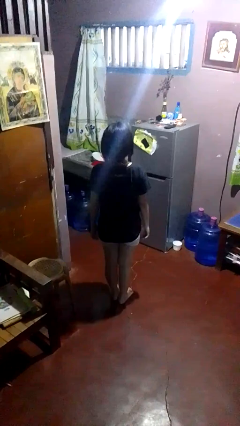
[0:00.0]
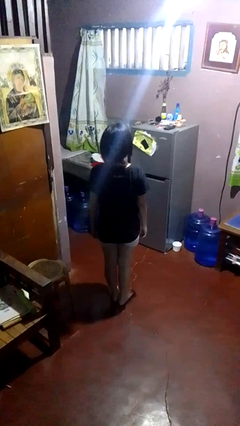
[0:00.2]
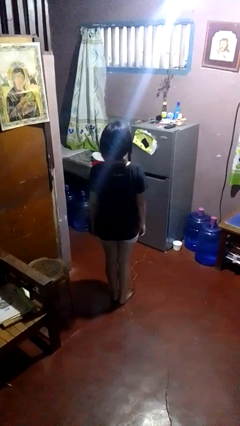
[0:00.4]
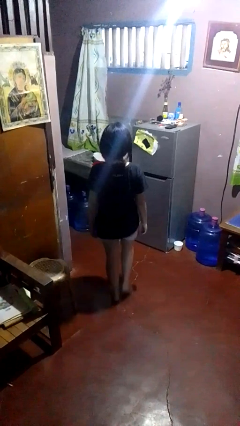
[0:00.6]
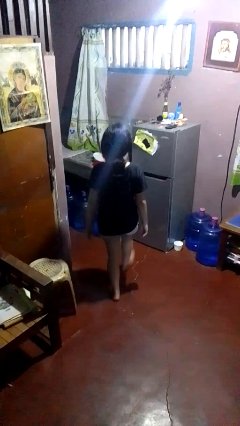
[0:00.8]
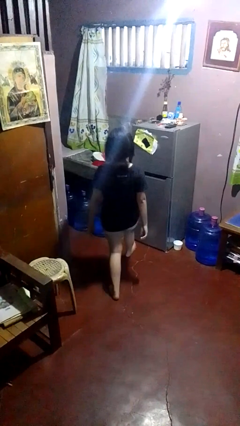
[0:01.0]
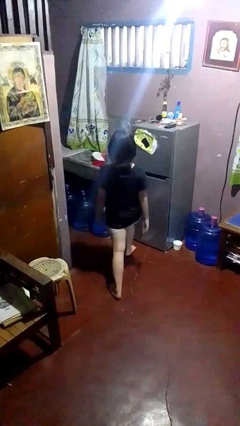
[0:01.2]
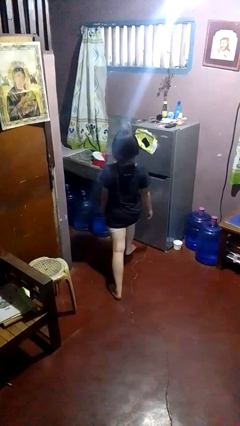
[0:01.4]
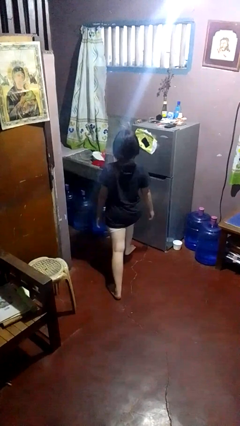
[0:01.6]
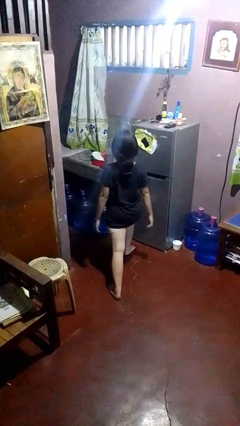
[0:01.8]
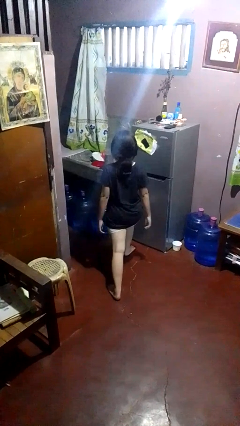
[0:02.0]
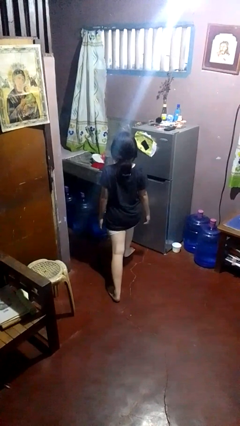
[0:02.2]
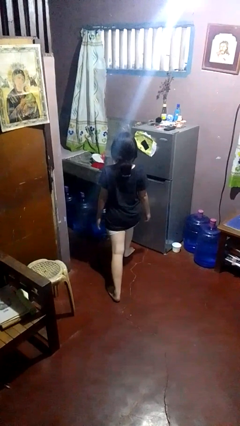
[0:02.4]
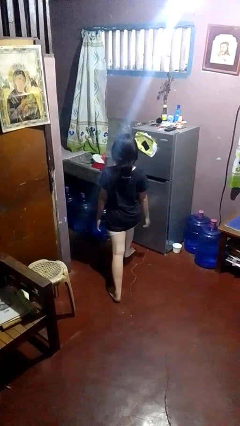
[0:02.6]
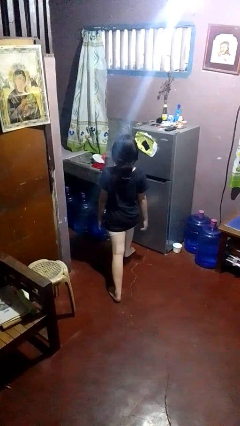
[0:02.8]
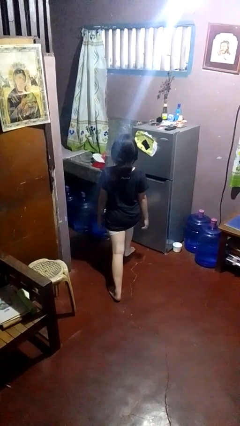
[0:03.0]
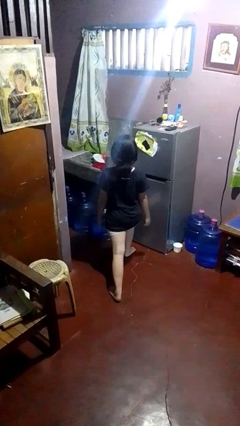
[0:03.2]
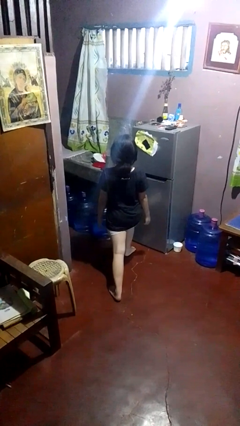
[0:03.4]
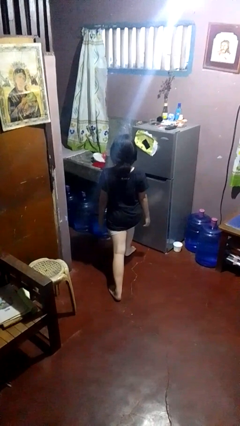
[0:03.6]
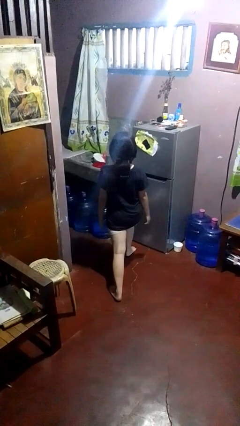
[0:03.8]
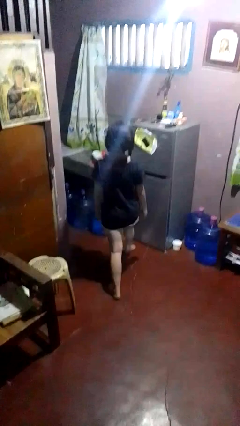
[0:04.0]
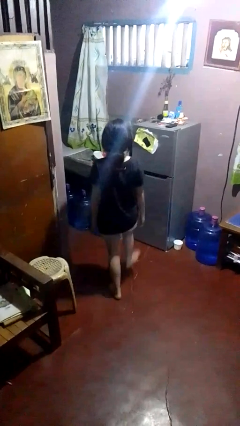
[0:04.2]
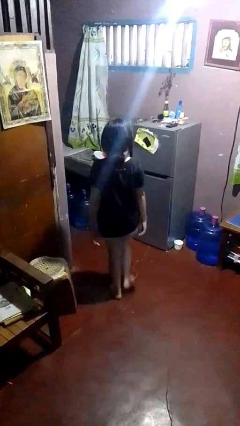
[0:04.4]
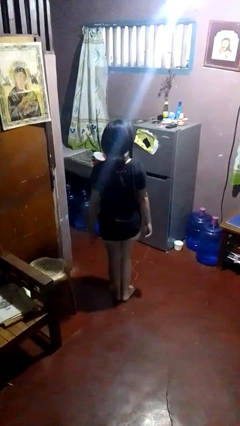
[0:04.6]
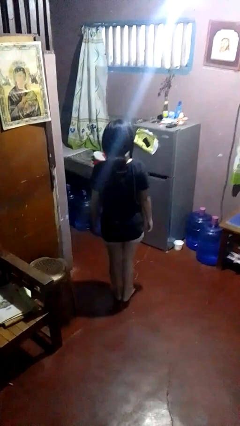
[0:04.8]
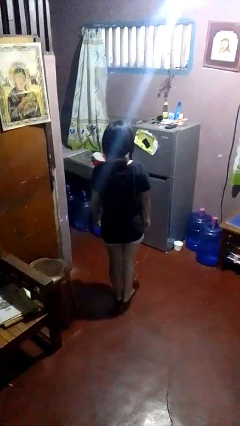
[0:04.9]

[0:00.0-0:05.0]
person exercises with lunges

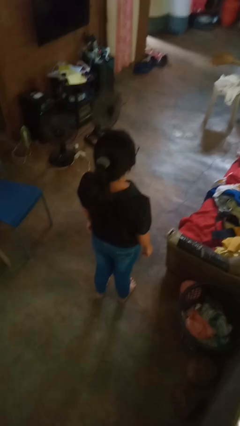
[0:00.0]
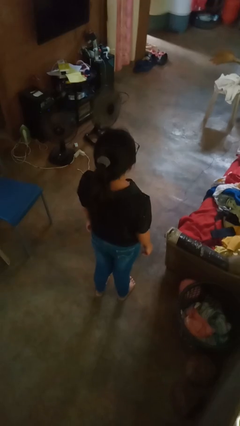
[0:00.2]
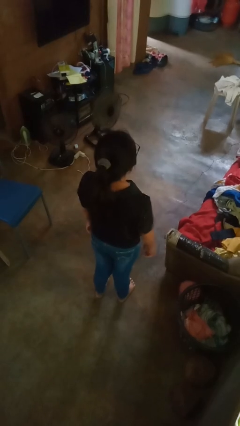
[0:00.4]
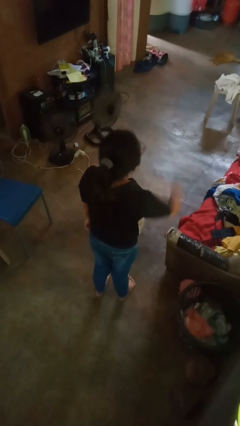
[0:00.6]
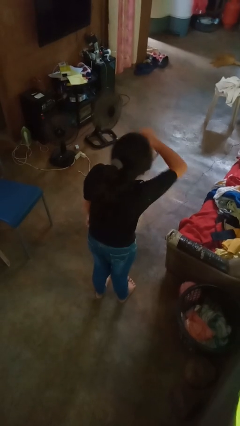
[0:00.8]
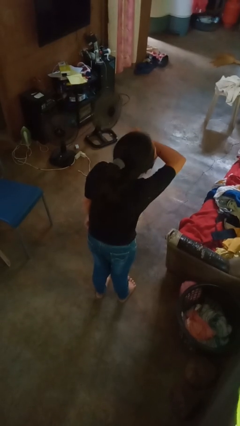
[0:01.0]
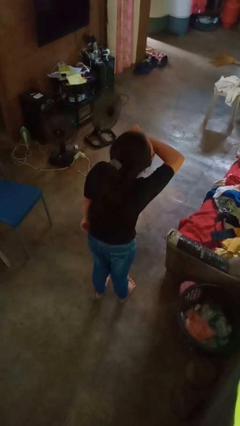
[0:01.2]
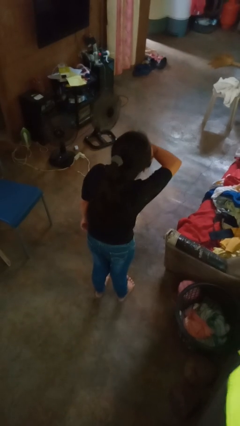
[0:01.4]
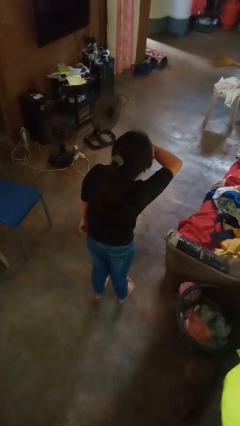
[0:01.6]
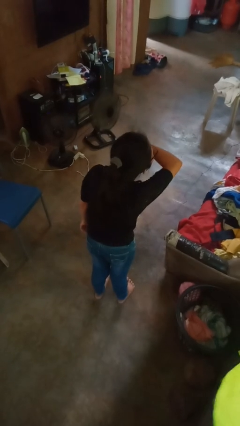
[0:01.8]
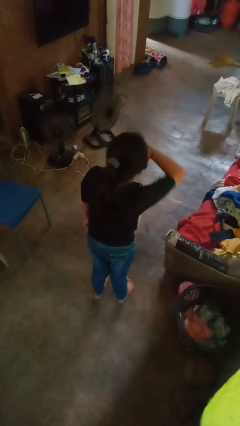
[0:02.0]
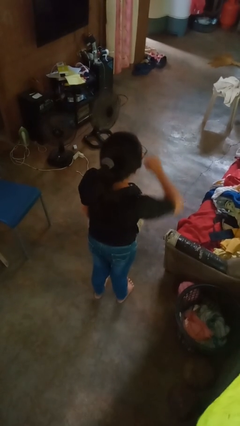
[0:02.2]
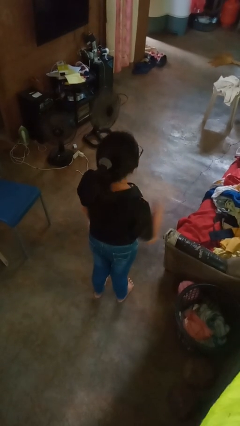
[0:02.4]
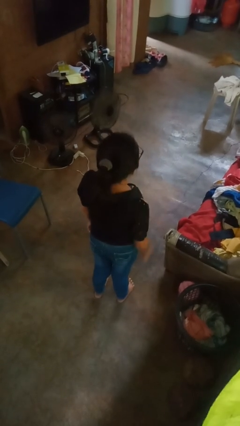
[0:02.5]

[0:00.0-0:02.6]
person sneezes into arm

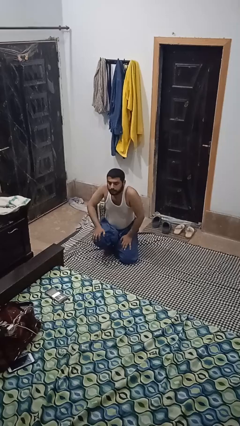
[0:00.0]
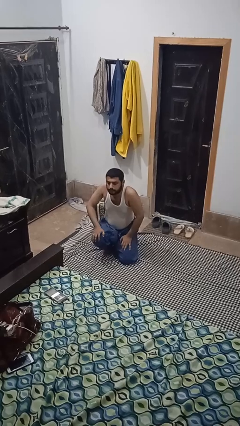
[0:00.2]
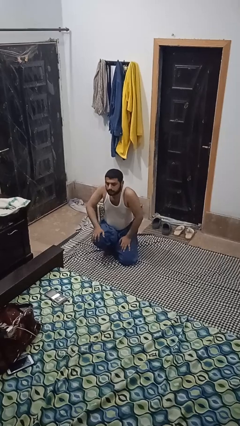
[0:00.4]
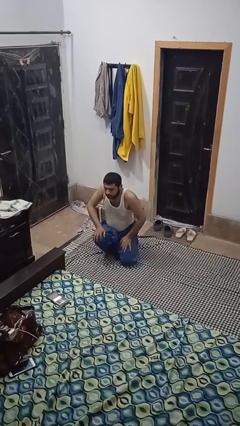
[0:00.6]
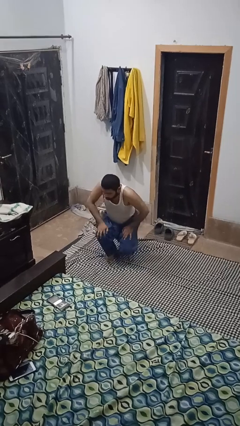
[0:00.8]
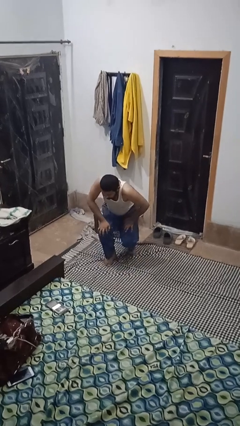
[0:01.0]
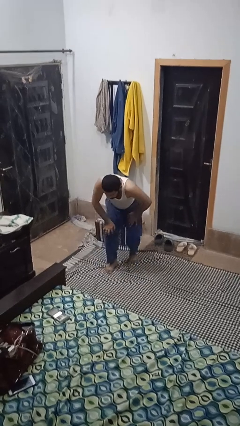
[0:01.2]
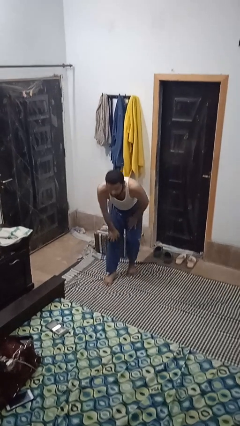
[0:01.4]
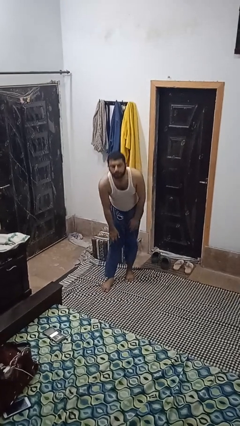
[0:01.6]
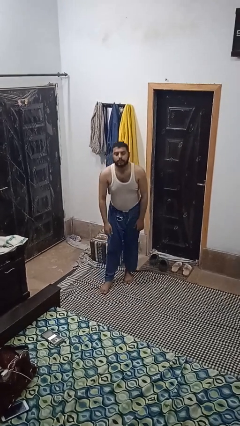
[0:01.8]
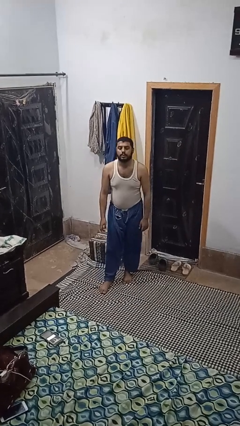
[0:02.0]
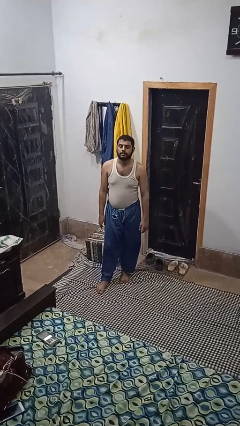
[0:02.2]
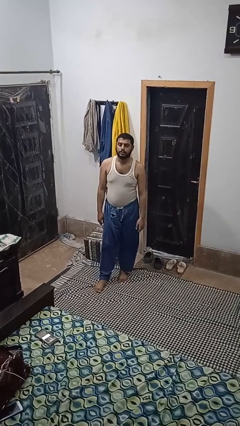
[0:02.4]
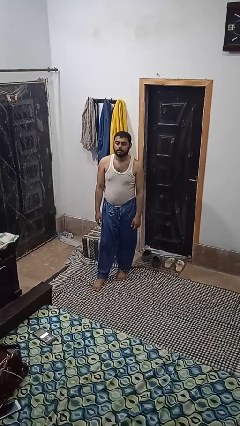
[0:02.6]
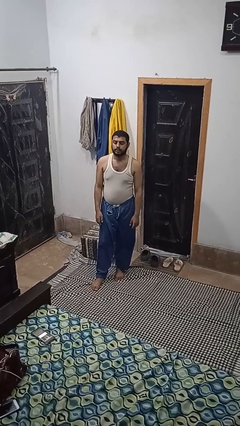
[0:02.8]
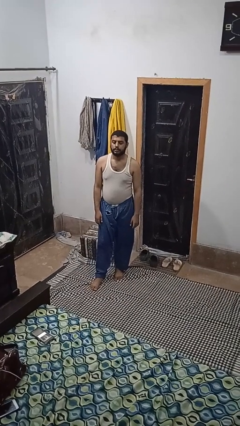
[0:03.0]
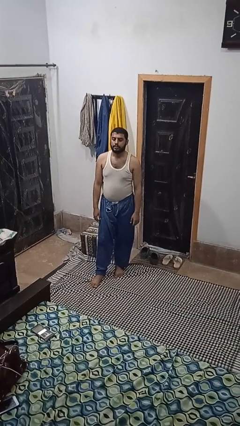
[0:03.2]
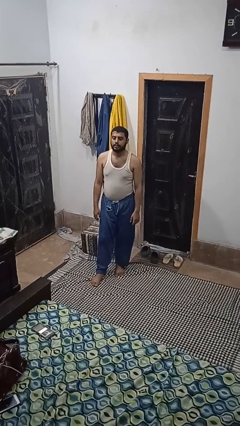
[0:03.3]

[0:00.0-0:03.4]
person stands up from floor

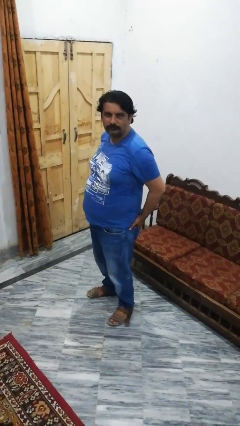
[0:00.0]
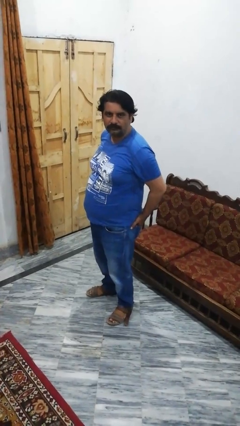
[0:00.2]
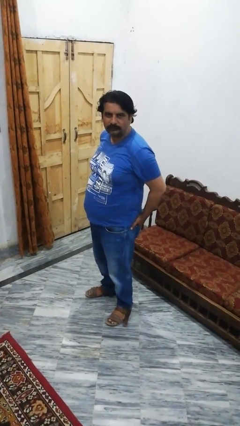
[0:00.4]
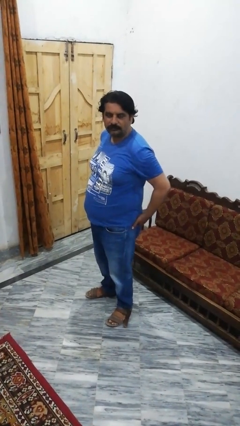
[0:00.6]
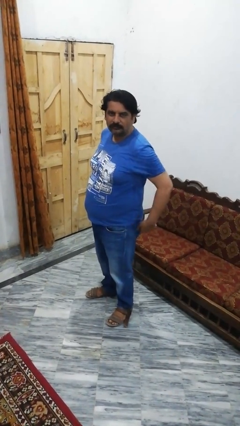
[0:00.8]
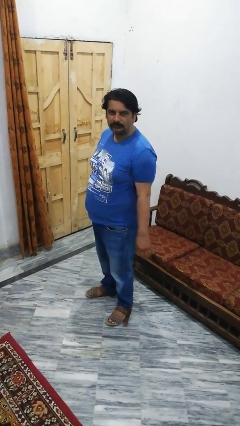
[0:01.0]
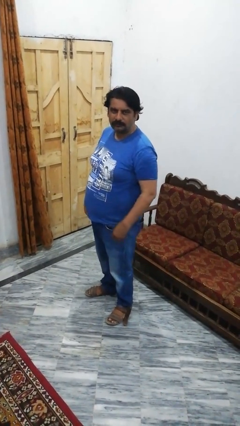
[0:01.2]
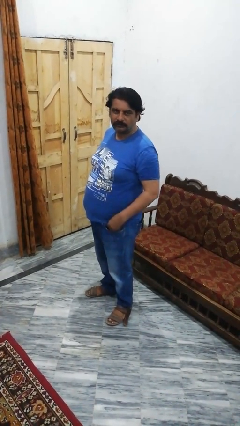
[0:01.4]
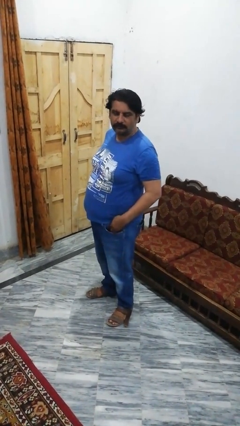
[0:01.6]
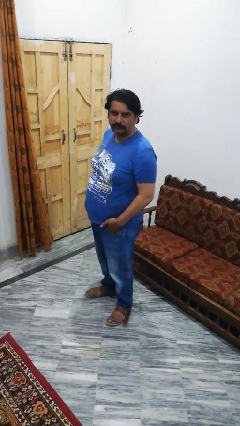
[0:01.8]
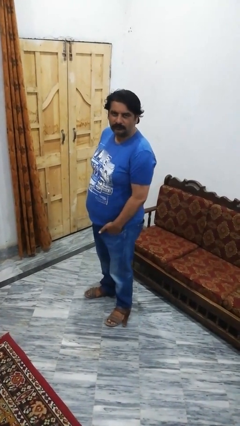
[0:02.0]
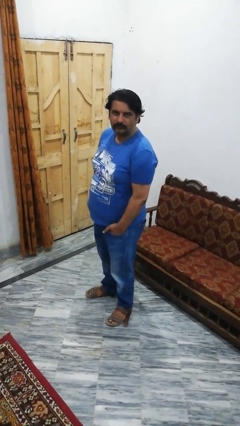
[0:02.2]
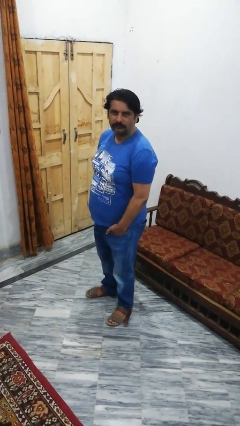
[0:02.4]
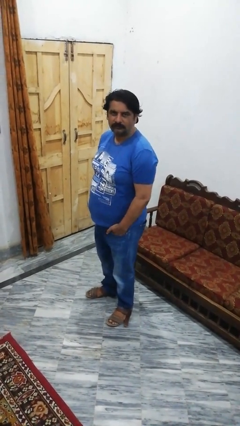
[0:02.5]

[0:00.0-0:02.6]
person puts hands in back pockets

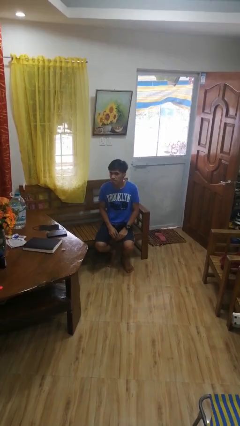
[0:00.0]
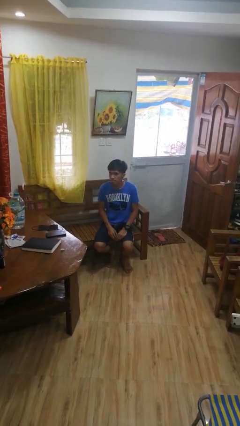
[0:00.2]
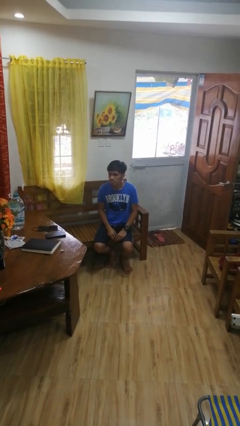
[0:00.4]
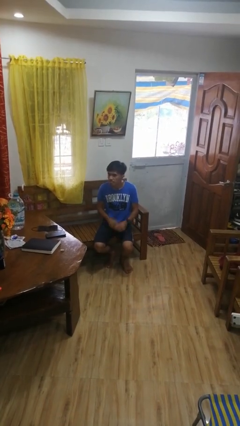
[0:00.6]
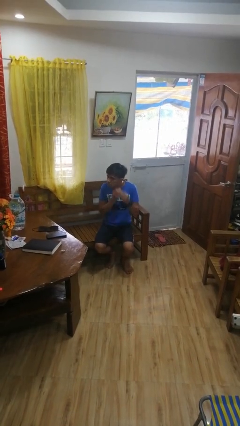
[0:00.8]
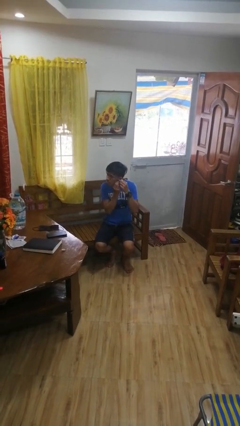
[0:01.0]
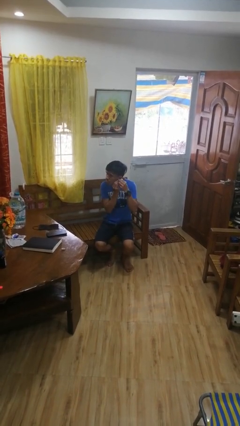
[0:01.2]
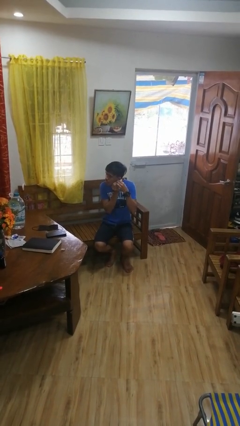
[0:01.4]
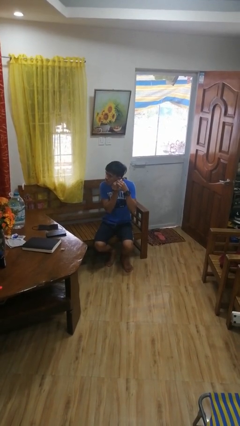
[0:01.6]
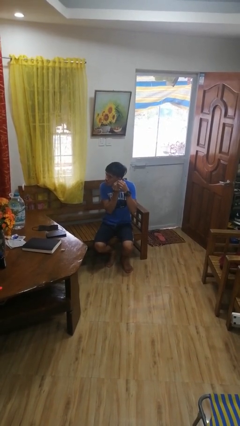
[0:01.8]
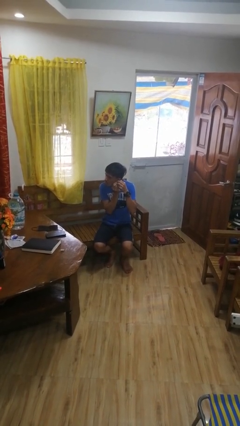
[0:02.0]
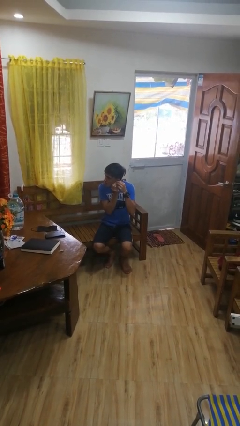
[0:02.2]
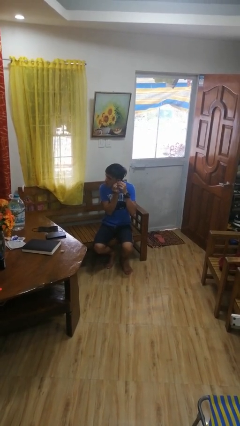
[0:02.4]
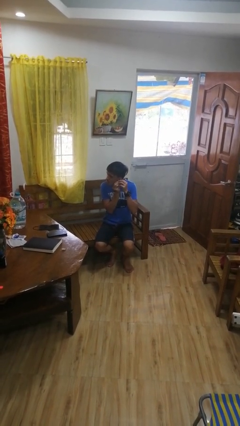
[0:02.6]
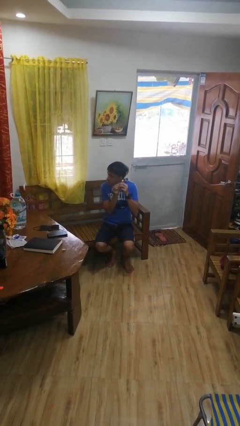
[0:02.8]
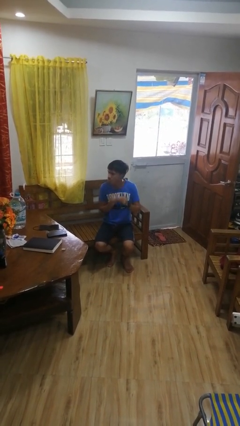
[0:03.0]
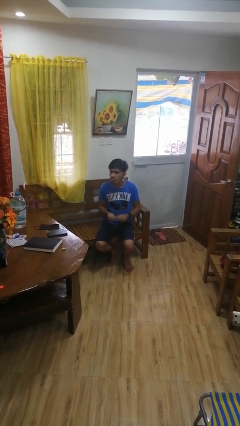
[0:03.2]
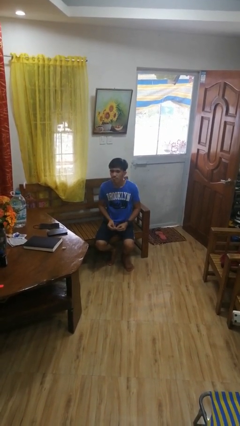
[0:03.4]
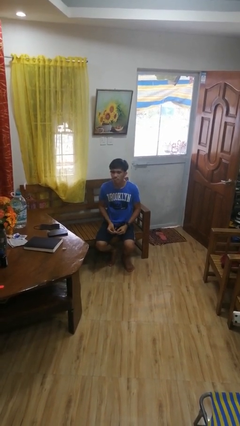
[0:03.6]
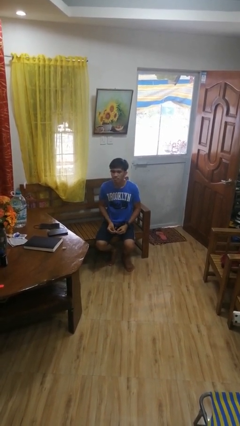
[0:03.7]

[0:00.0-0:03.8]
person takes off earrings
